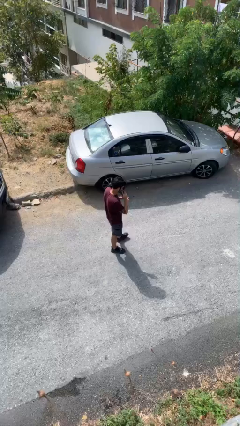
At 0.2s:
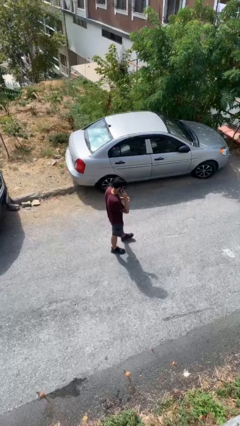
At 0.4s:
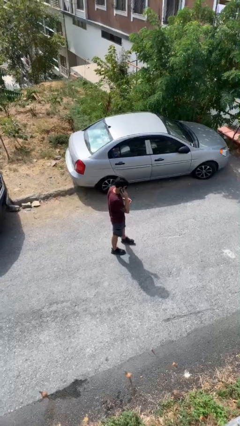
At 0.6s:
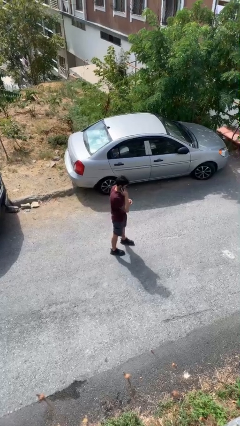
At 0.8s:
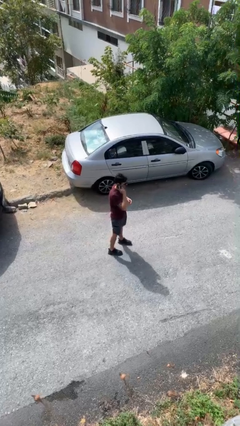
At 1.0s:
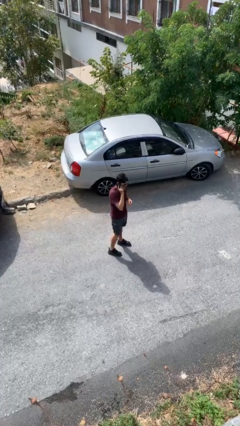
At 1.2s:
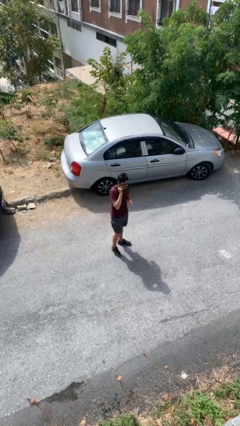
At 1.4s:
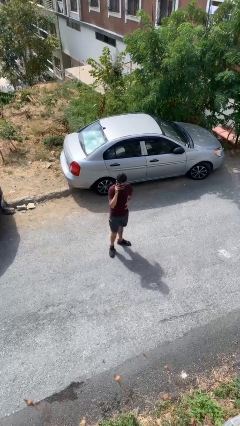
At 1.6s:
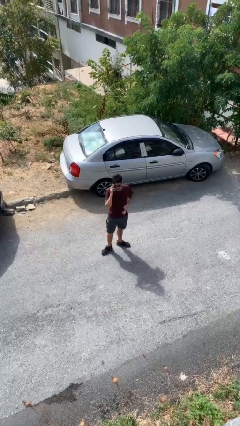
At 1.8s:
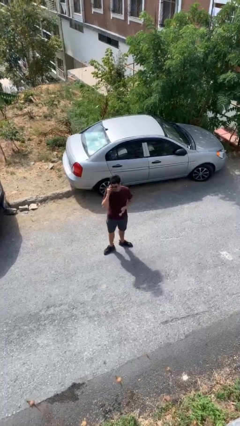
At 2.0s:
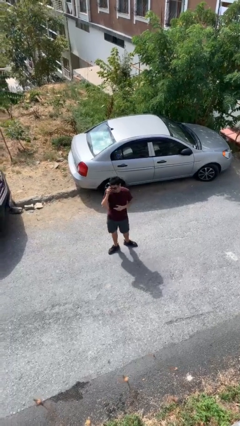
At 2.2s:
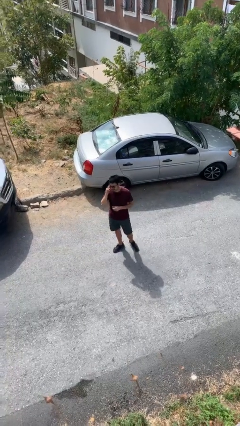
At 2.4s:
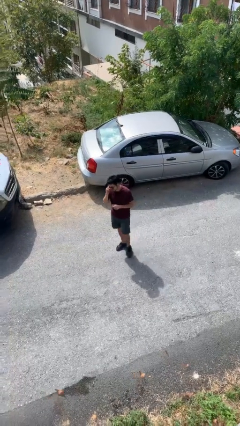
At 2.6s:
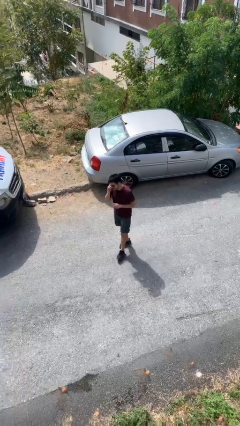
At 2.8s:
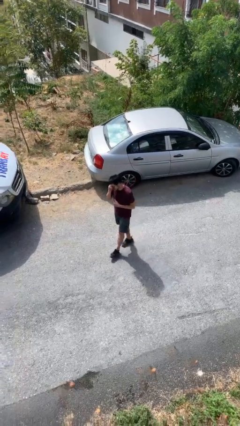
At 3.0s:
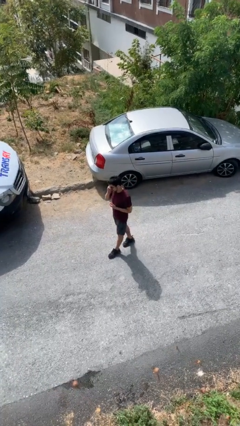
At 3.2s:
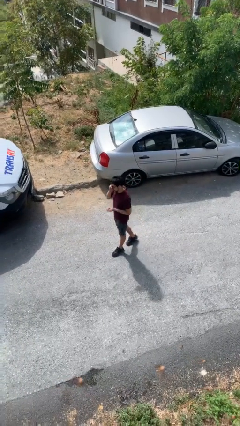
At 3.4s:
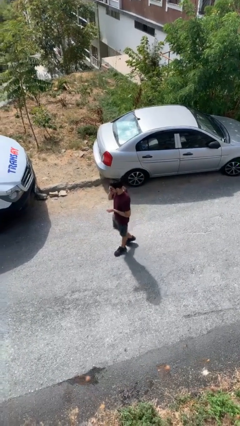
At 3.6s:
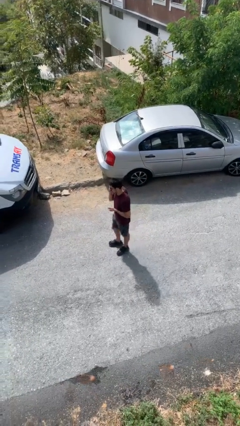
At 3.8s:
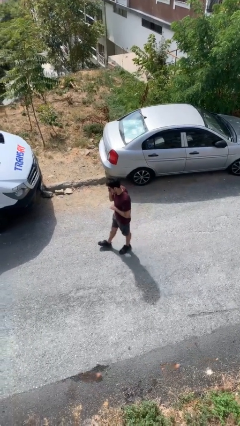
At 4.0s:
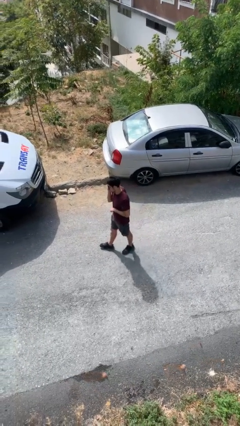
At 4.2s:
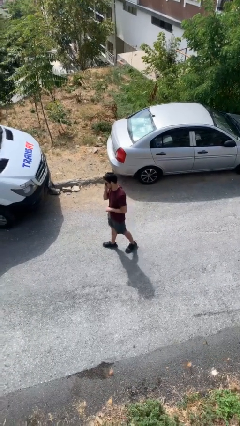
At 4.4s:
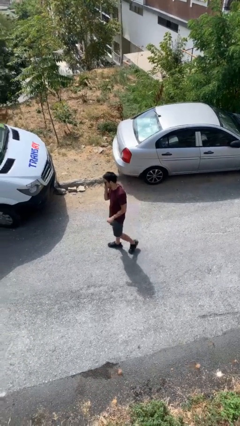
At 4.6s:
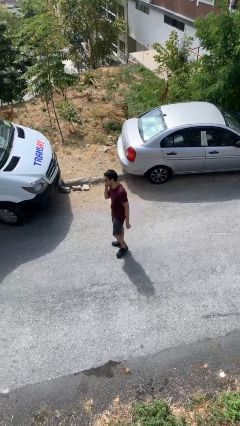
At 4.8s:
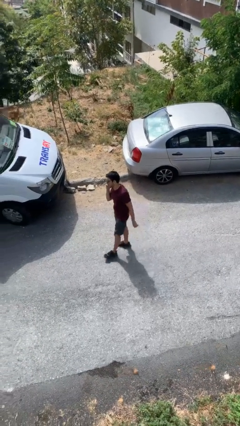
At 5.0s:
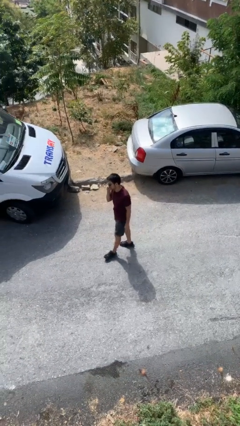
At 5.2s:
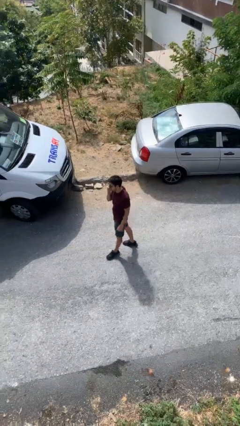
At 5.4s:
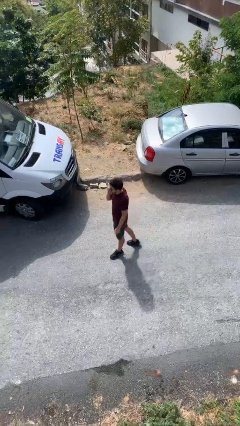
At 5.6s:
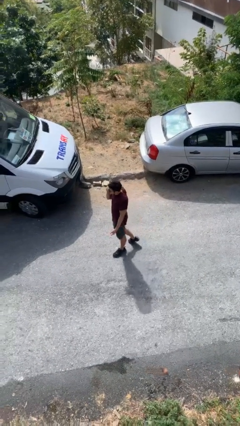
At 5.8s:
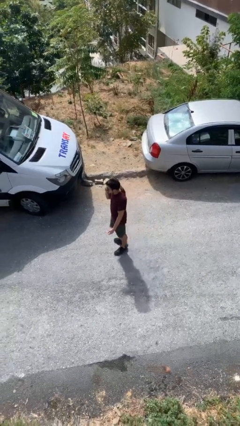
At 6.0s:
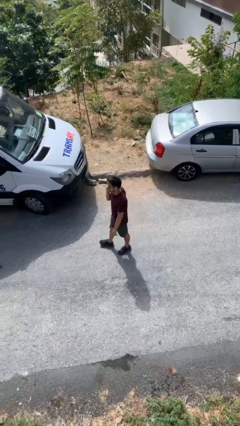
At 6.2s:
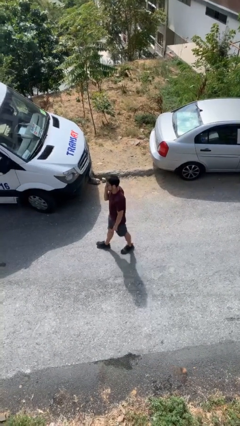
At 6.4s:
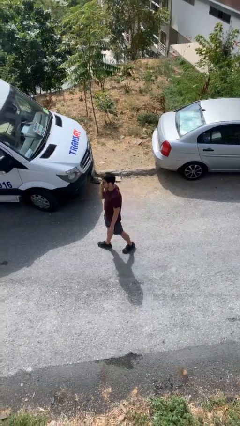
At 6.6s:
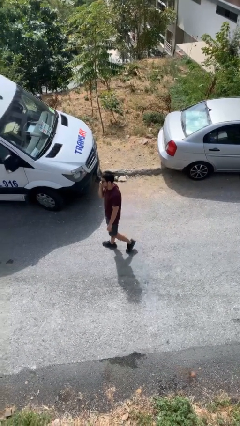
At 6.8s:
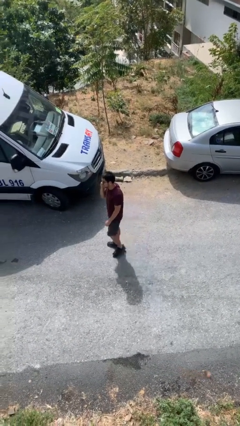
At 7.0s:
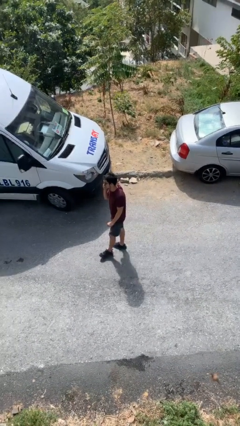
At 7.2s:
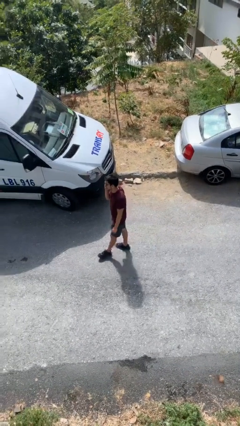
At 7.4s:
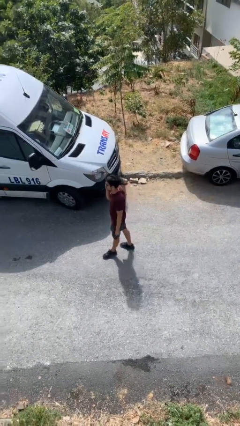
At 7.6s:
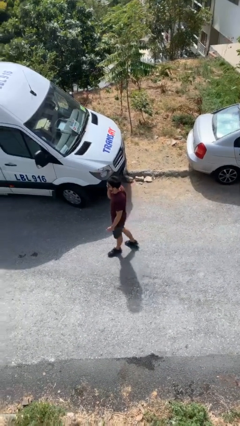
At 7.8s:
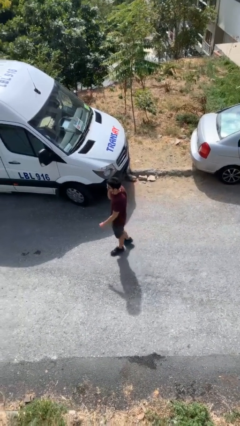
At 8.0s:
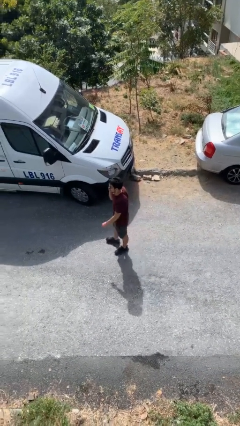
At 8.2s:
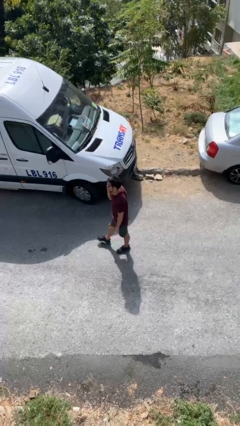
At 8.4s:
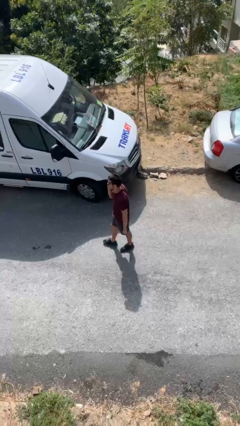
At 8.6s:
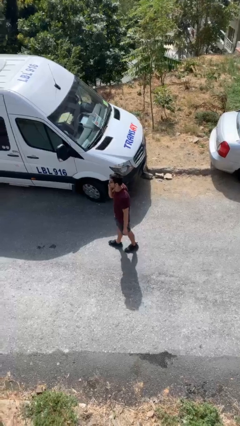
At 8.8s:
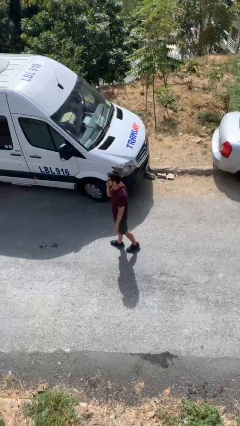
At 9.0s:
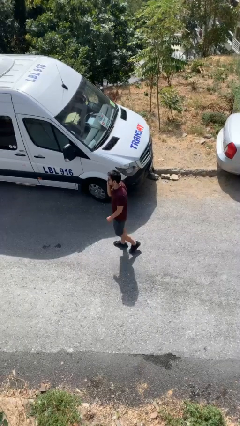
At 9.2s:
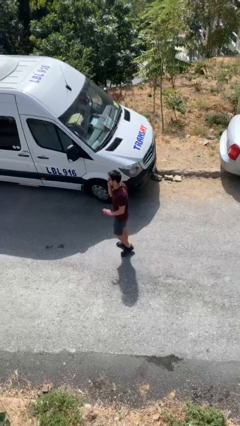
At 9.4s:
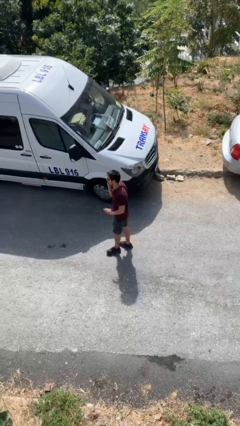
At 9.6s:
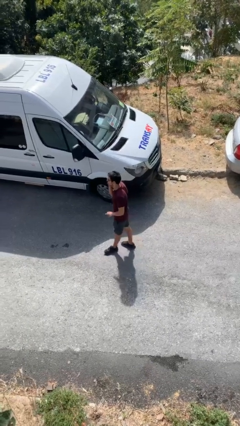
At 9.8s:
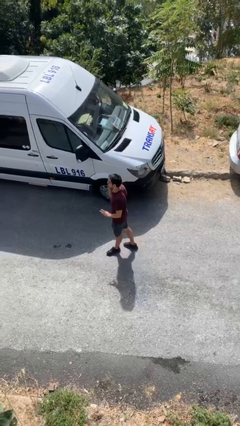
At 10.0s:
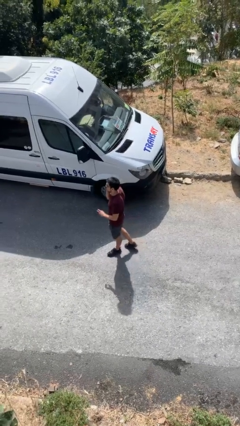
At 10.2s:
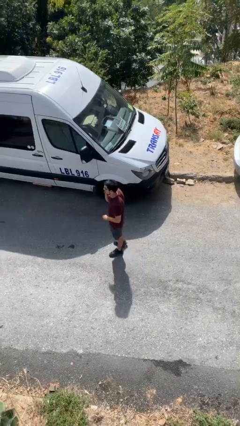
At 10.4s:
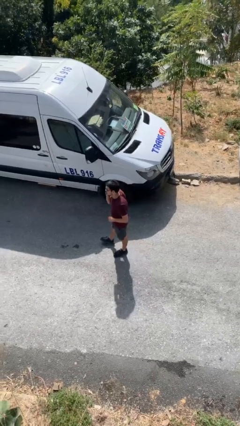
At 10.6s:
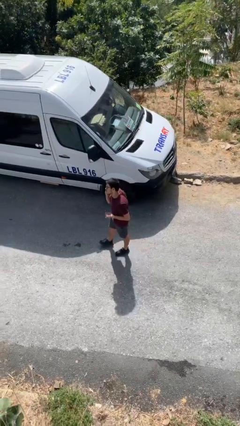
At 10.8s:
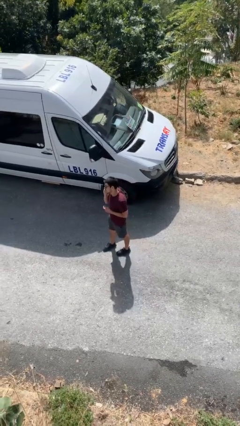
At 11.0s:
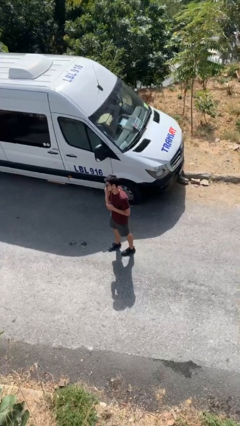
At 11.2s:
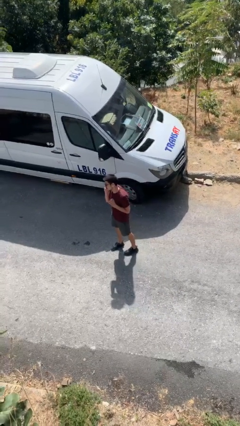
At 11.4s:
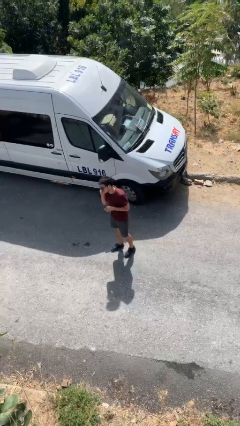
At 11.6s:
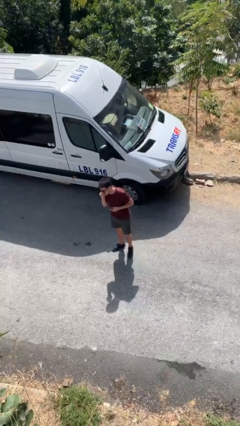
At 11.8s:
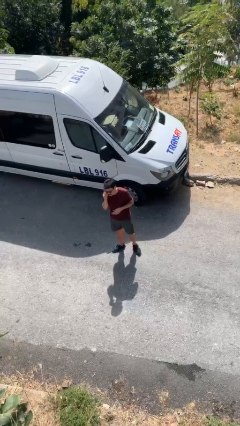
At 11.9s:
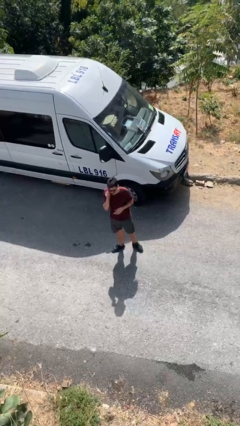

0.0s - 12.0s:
person talks on phone

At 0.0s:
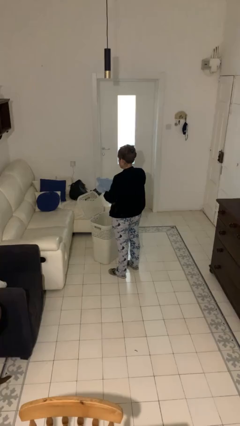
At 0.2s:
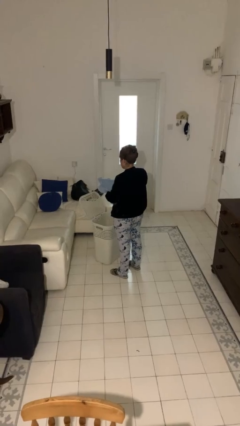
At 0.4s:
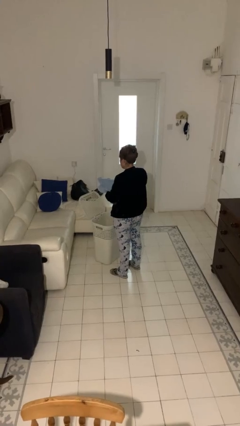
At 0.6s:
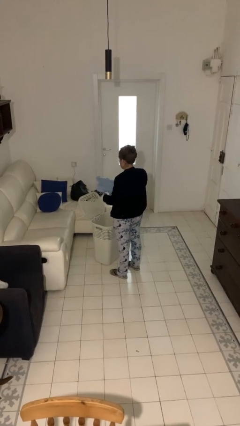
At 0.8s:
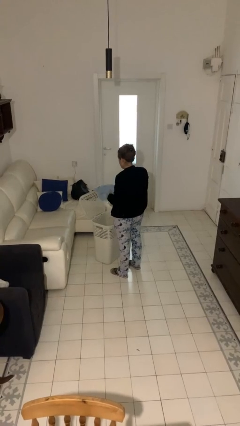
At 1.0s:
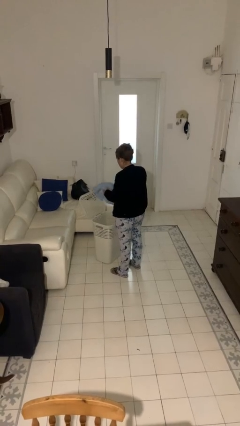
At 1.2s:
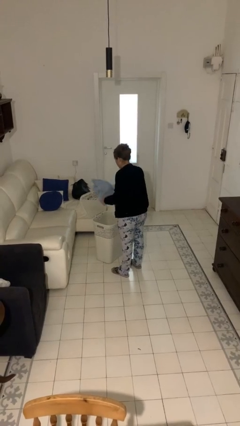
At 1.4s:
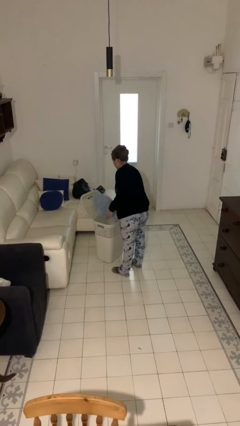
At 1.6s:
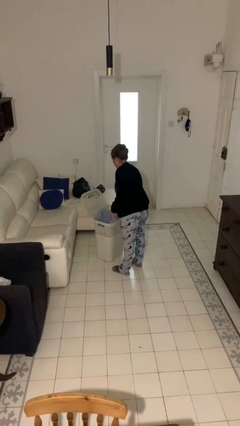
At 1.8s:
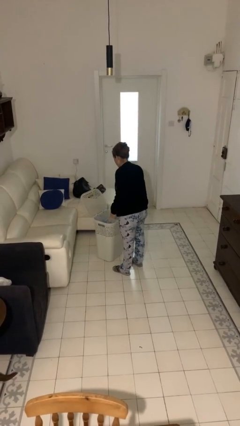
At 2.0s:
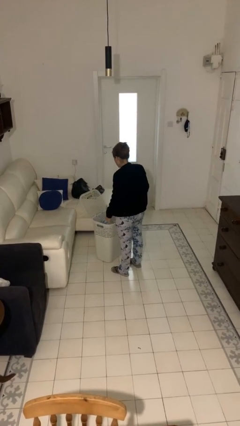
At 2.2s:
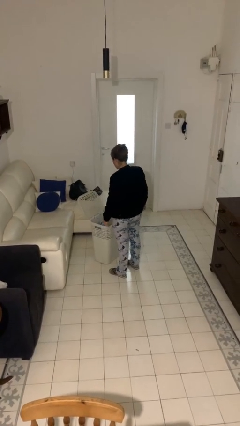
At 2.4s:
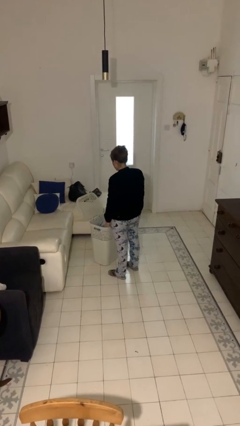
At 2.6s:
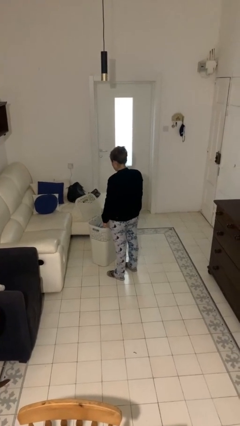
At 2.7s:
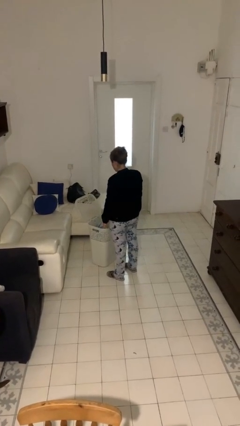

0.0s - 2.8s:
person puts object into basket

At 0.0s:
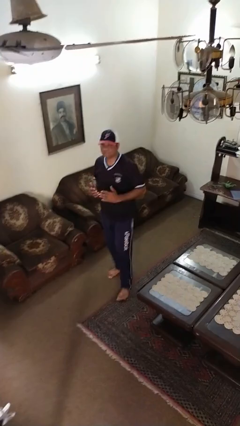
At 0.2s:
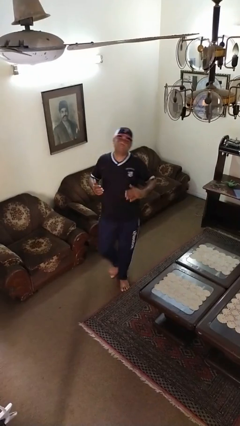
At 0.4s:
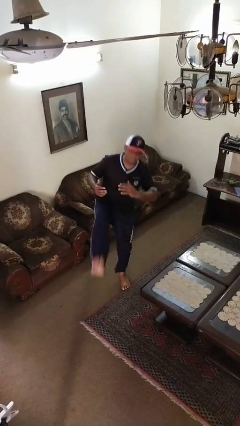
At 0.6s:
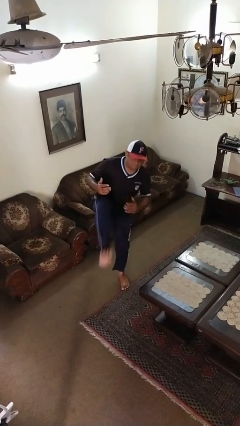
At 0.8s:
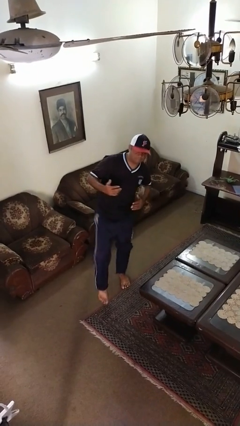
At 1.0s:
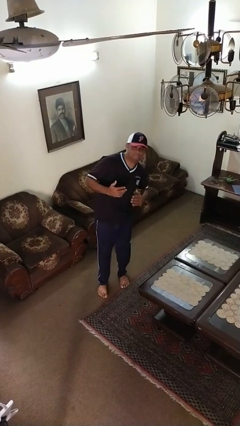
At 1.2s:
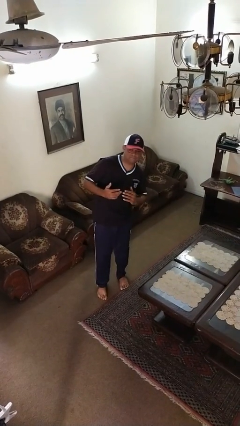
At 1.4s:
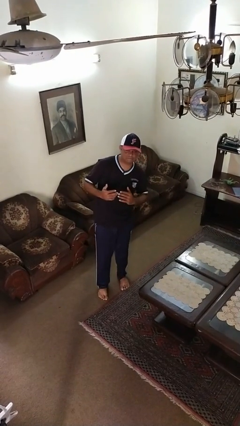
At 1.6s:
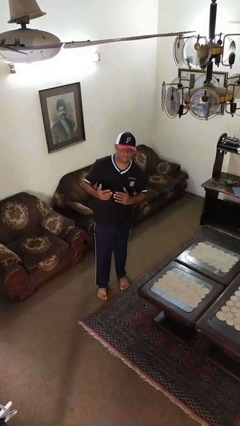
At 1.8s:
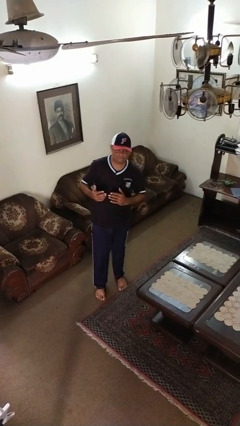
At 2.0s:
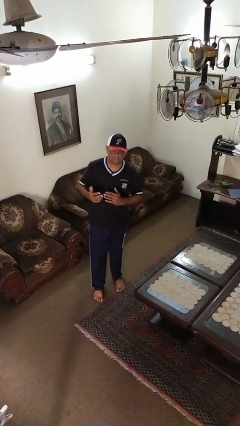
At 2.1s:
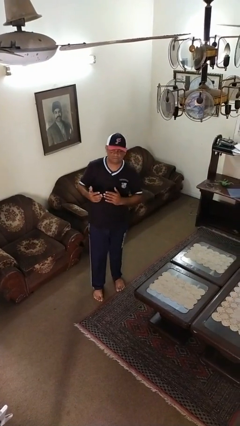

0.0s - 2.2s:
person karate kicks

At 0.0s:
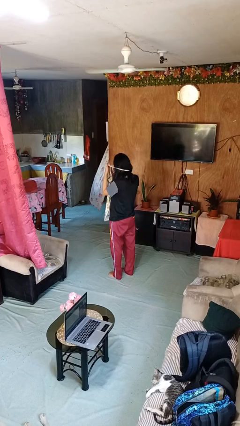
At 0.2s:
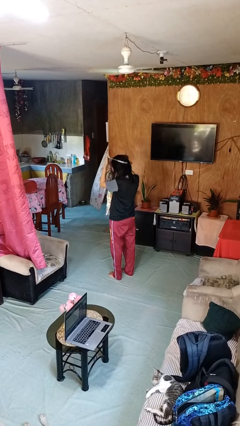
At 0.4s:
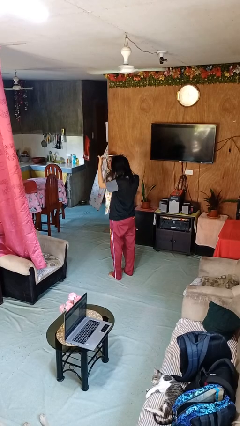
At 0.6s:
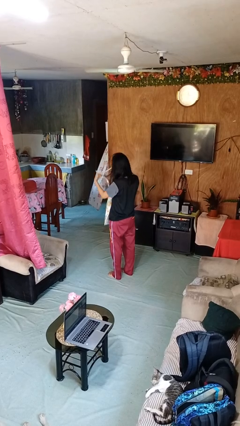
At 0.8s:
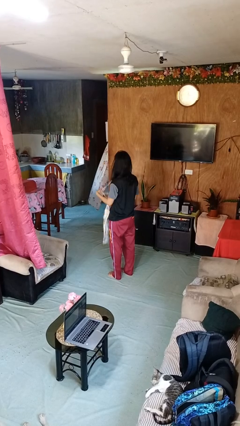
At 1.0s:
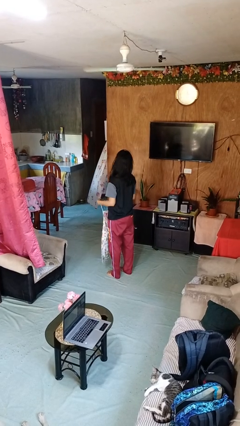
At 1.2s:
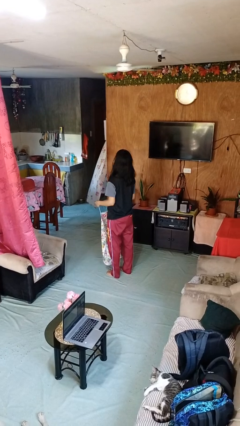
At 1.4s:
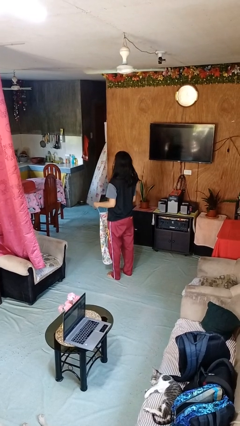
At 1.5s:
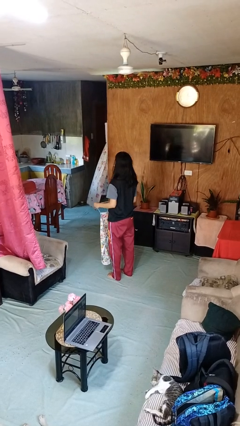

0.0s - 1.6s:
person takes off apron
